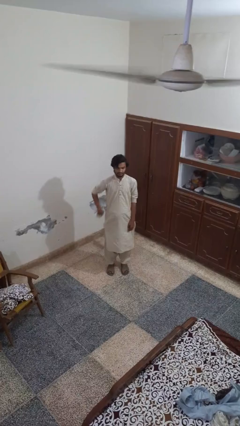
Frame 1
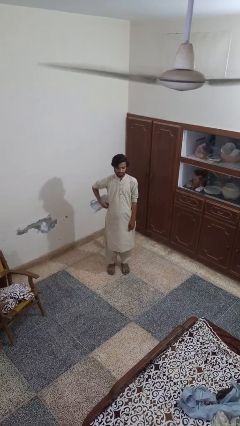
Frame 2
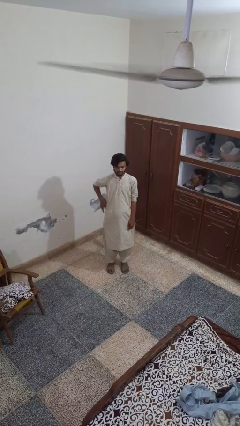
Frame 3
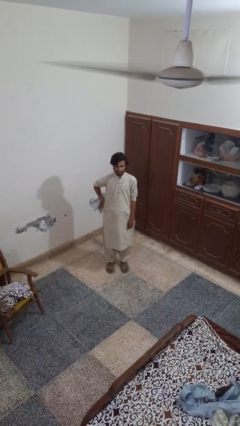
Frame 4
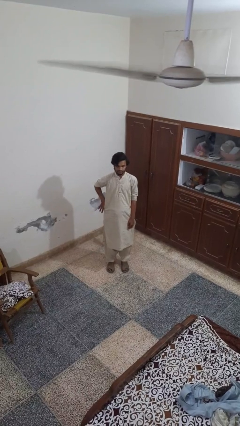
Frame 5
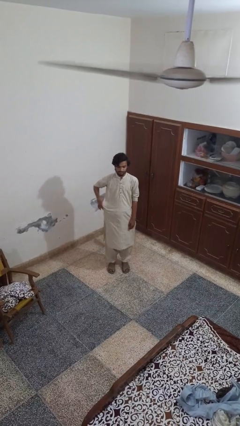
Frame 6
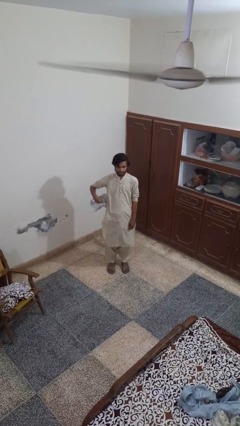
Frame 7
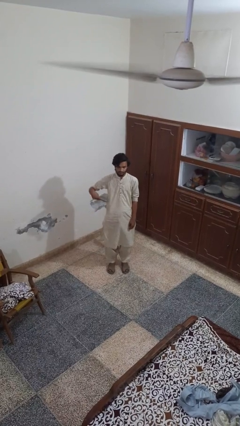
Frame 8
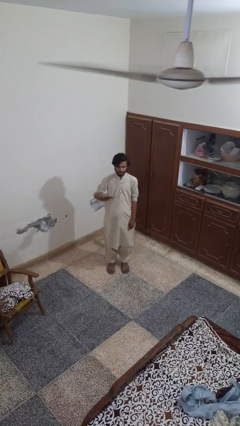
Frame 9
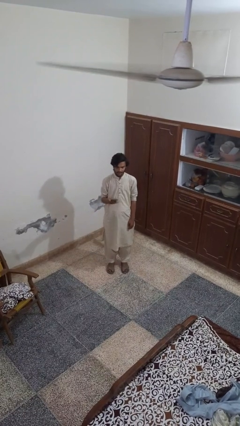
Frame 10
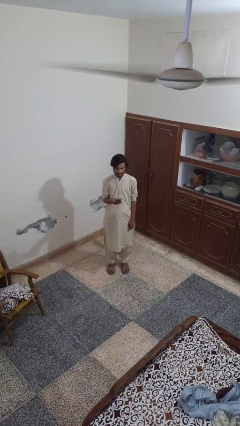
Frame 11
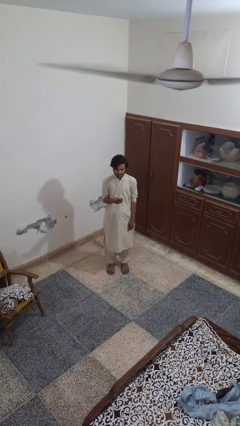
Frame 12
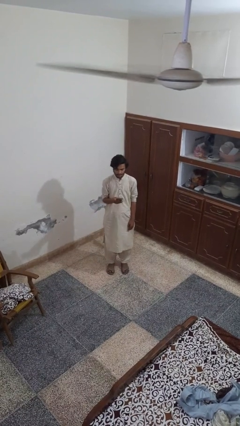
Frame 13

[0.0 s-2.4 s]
person takes phone from pocket

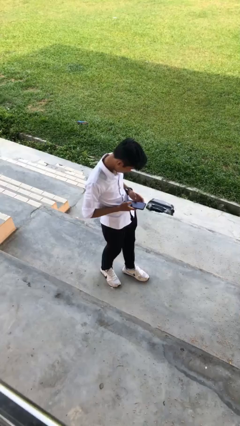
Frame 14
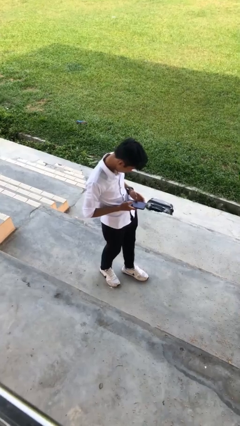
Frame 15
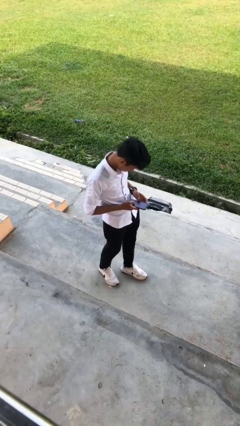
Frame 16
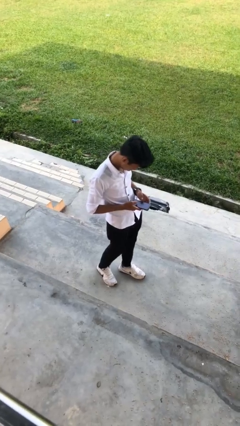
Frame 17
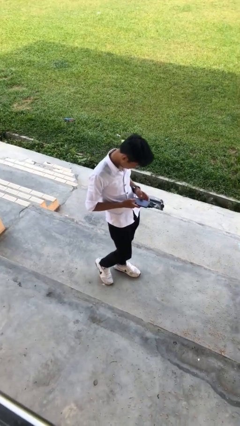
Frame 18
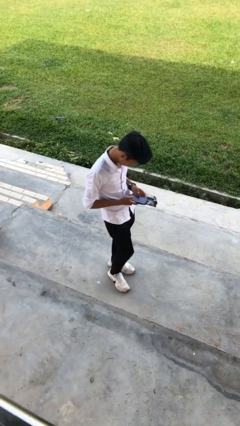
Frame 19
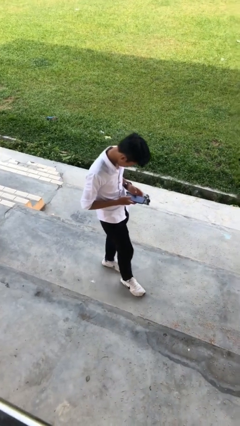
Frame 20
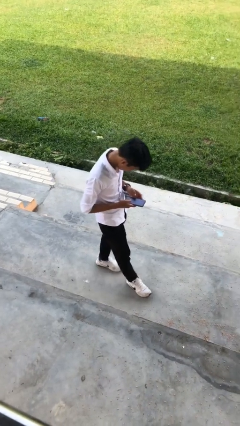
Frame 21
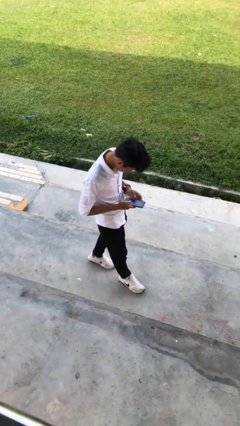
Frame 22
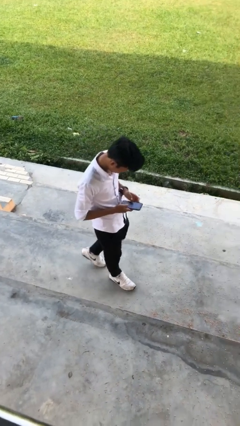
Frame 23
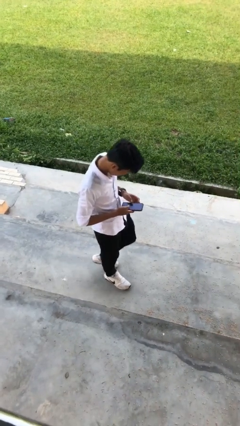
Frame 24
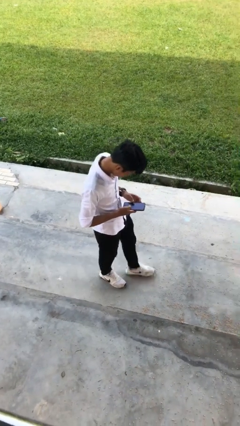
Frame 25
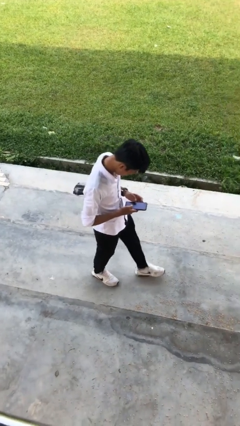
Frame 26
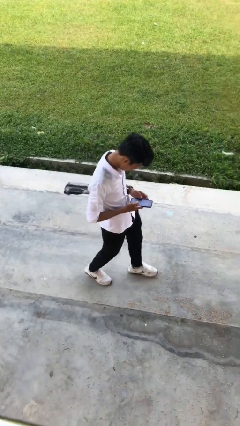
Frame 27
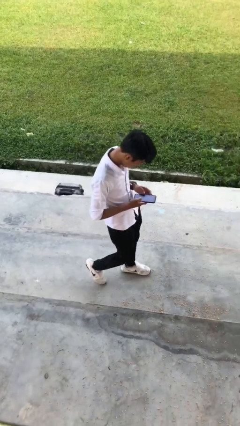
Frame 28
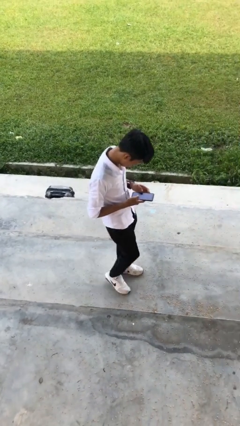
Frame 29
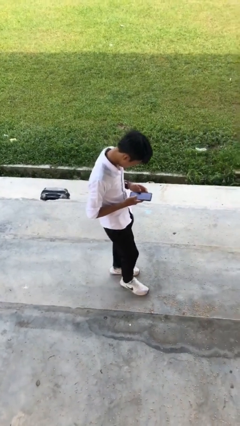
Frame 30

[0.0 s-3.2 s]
person texts on phone

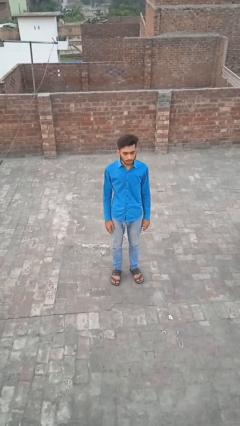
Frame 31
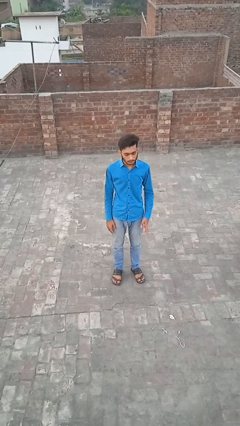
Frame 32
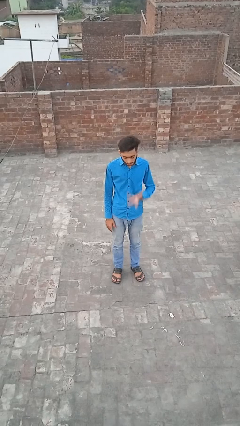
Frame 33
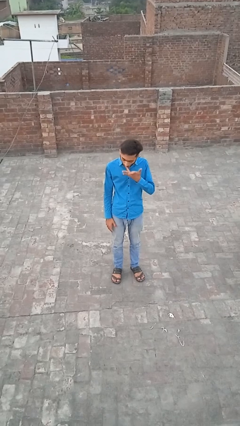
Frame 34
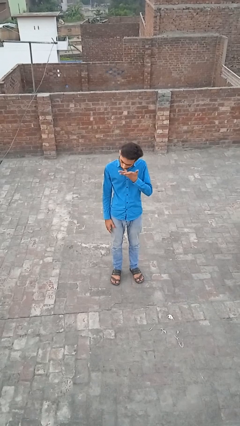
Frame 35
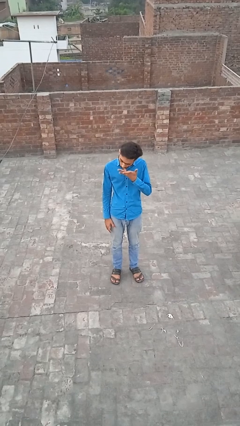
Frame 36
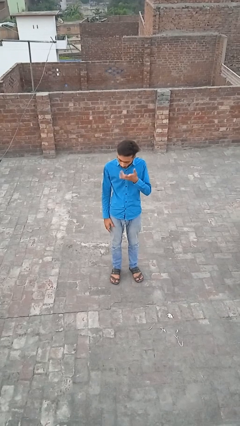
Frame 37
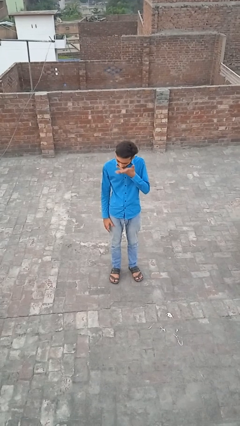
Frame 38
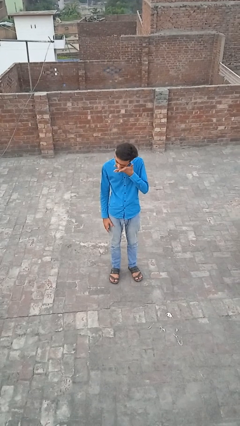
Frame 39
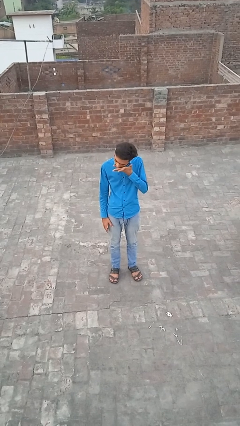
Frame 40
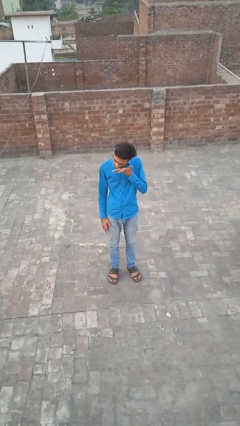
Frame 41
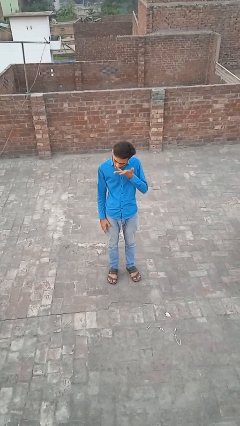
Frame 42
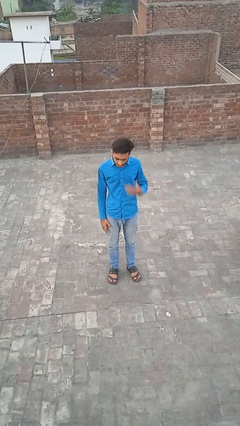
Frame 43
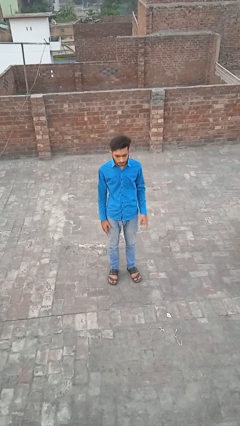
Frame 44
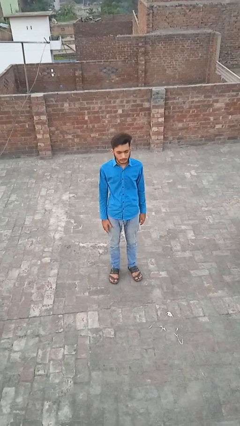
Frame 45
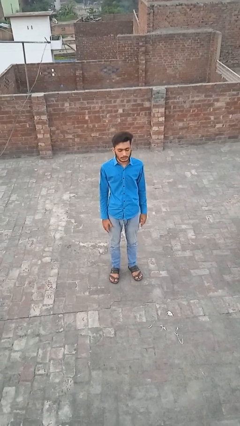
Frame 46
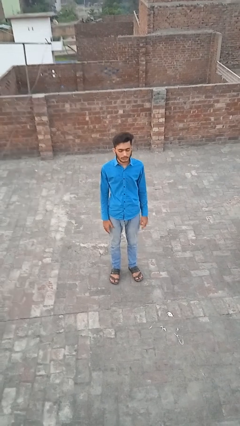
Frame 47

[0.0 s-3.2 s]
person licks fingers

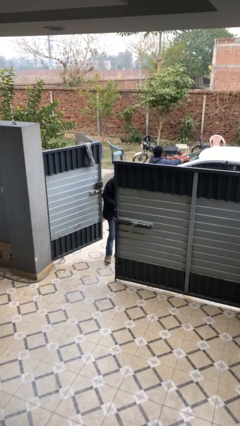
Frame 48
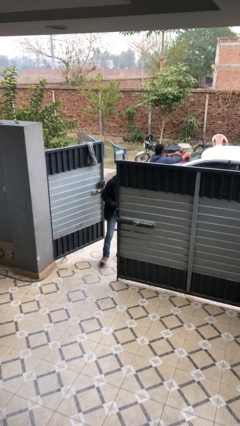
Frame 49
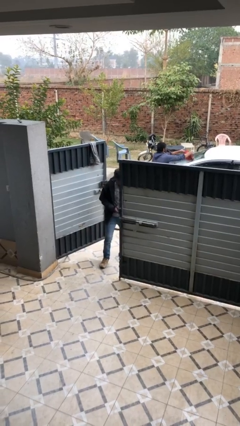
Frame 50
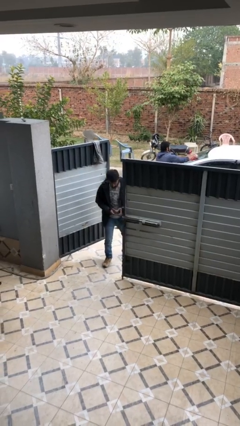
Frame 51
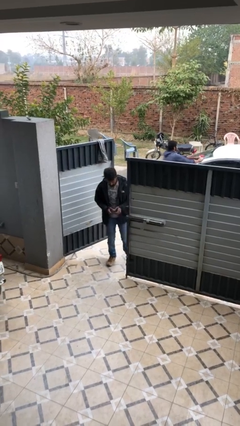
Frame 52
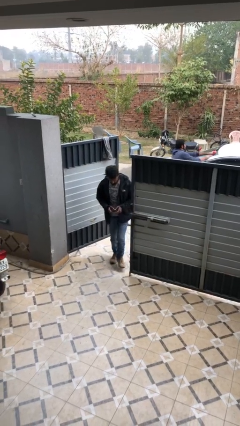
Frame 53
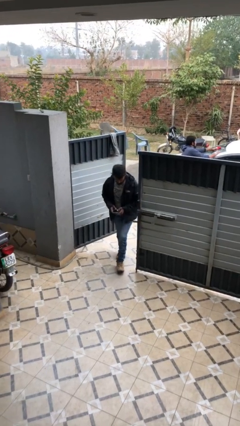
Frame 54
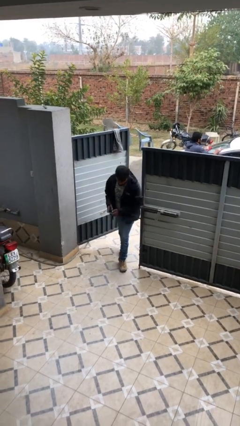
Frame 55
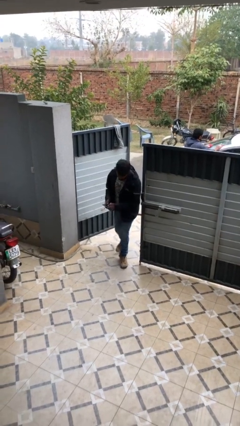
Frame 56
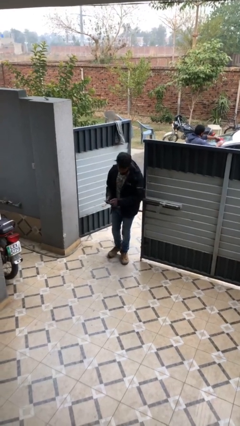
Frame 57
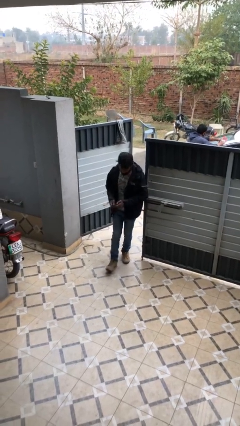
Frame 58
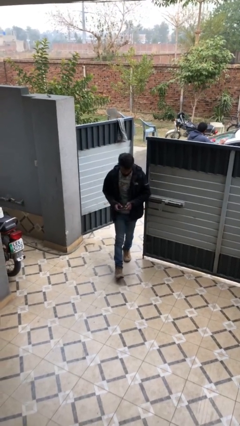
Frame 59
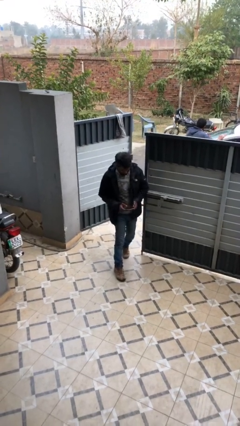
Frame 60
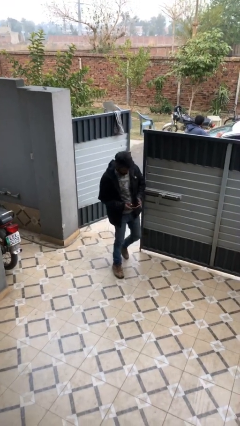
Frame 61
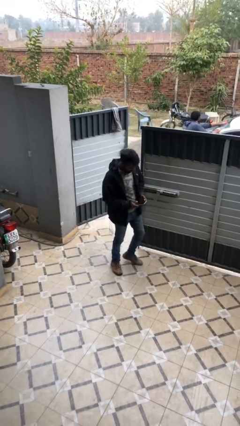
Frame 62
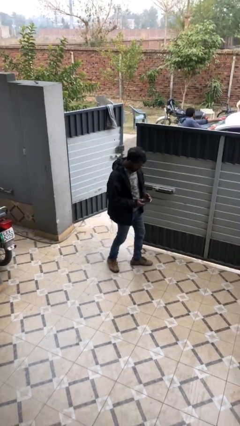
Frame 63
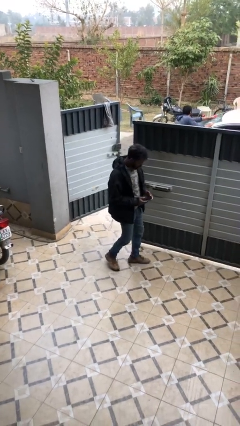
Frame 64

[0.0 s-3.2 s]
person enters scene through structure

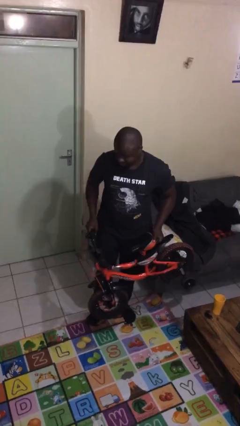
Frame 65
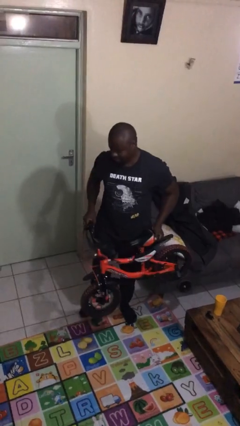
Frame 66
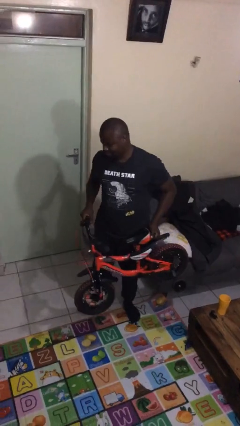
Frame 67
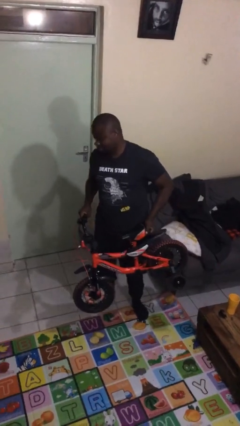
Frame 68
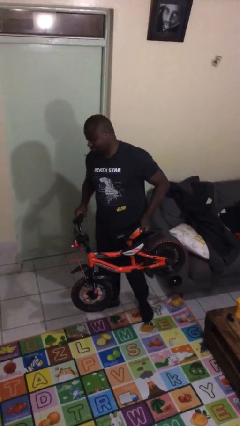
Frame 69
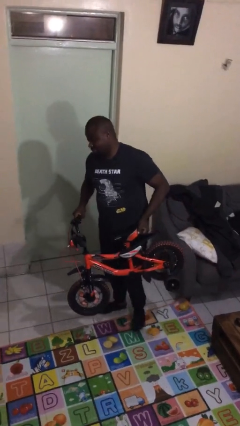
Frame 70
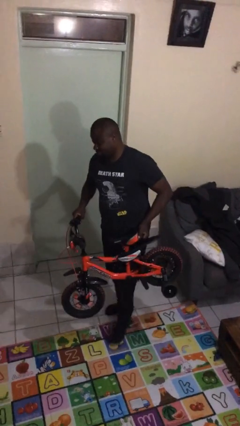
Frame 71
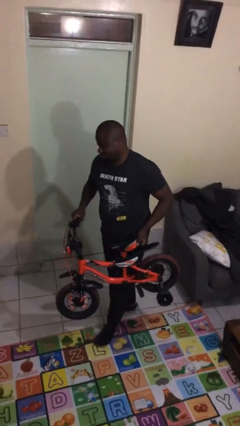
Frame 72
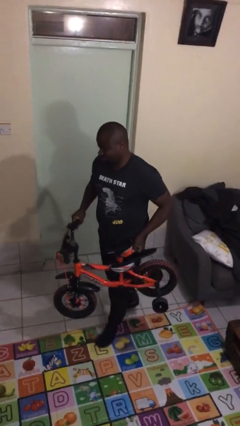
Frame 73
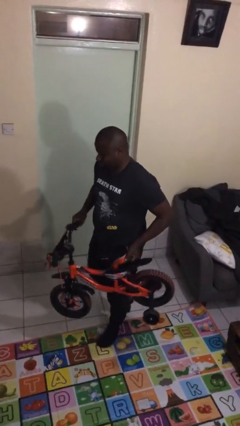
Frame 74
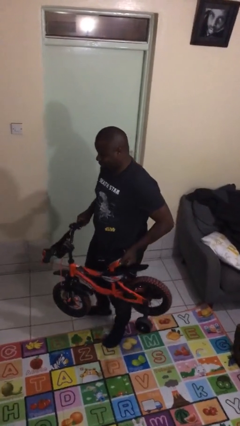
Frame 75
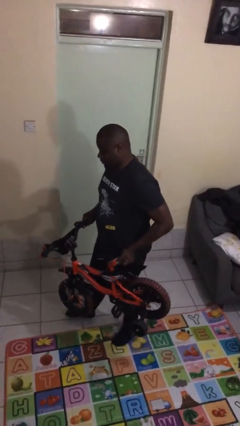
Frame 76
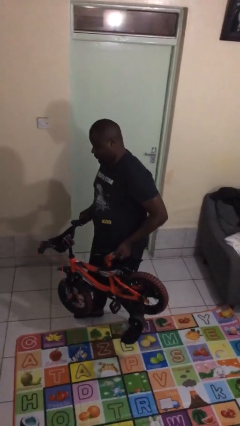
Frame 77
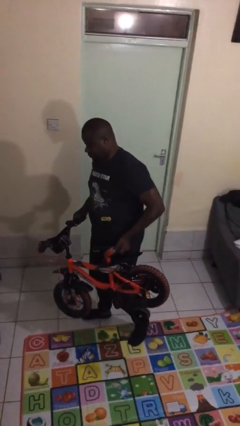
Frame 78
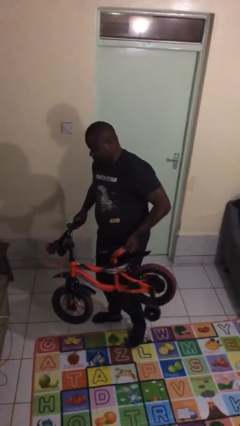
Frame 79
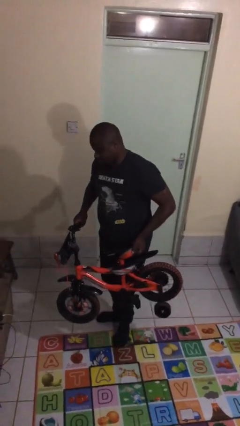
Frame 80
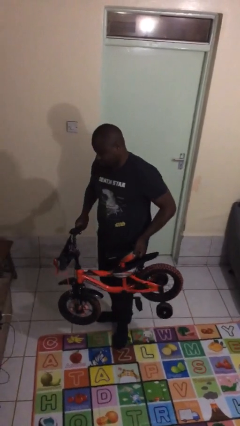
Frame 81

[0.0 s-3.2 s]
person carries bicycle

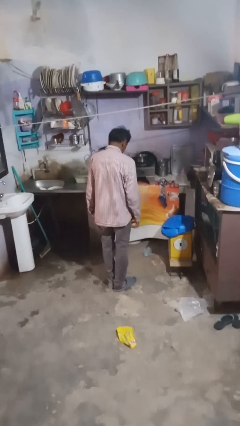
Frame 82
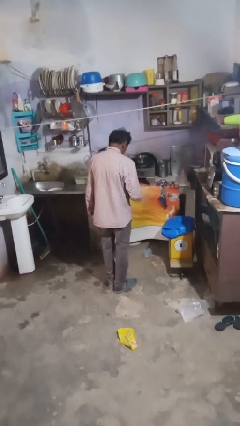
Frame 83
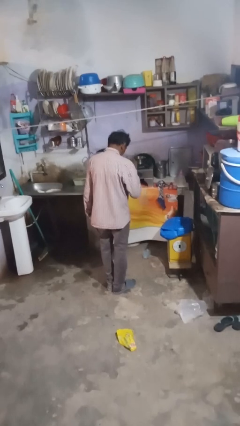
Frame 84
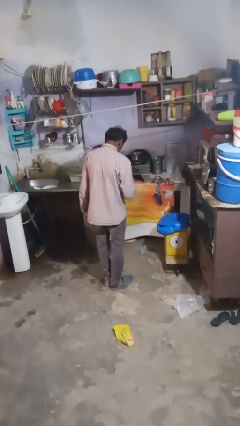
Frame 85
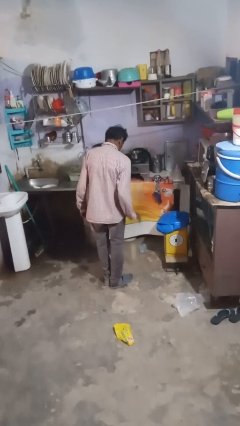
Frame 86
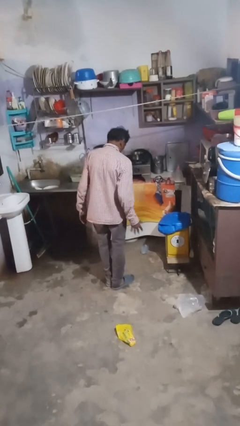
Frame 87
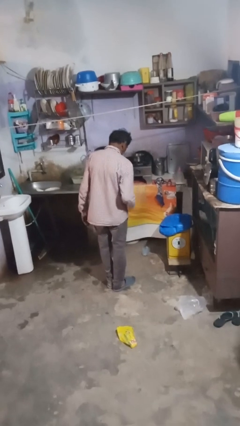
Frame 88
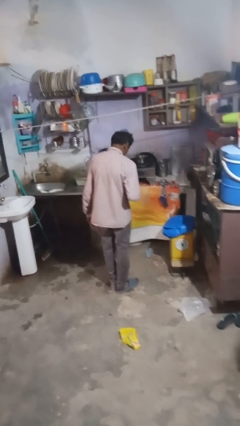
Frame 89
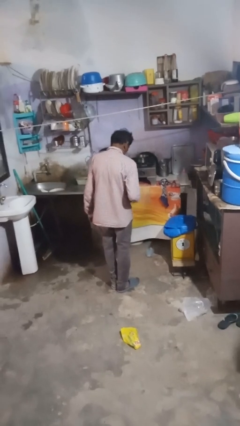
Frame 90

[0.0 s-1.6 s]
person bounces ball on floor
